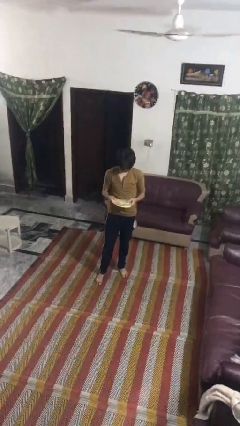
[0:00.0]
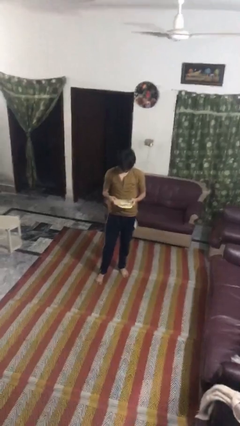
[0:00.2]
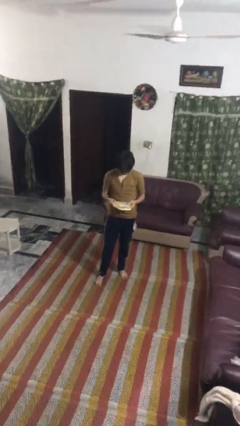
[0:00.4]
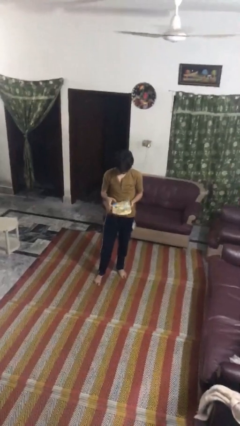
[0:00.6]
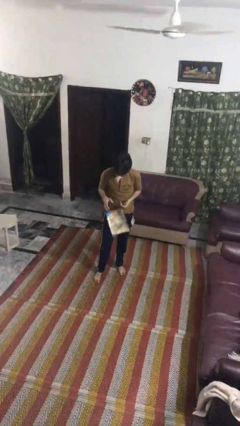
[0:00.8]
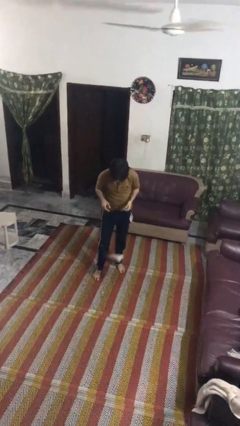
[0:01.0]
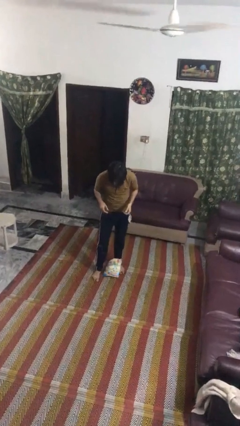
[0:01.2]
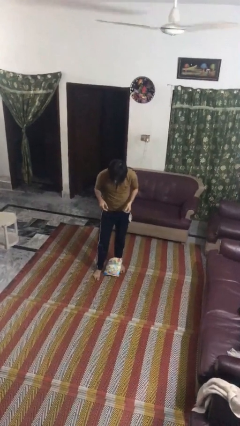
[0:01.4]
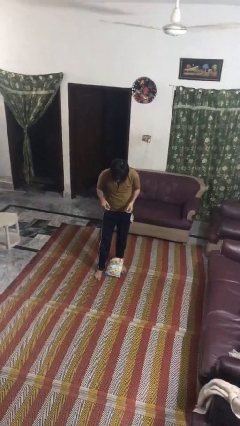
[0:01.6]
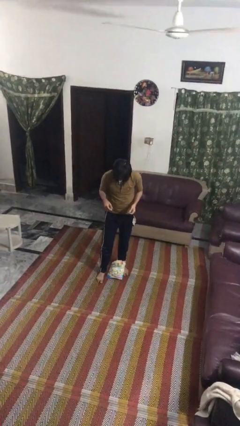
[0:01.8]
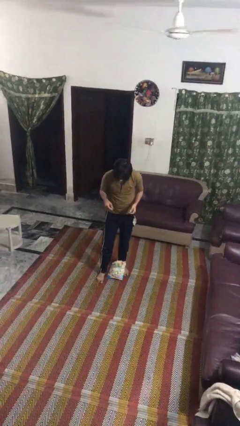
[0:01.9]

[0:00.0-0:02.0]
person drops object

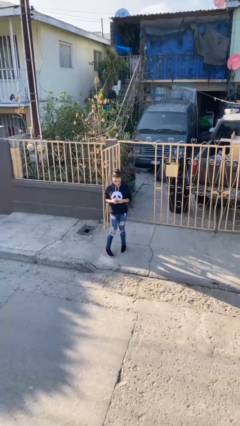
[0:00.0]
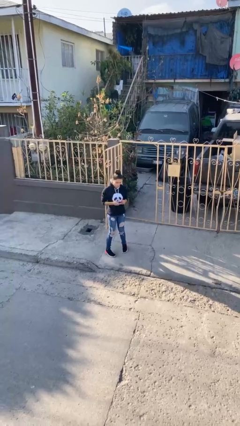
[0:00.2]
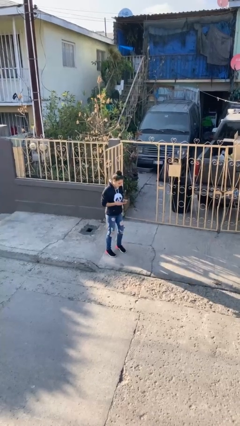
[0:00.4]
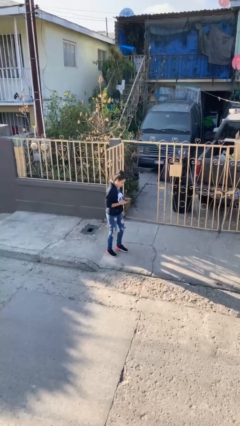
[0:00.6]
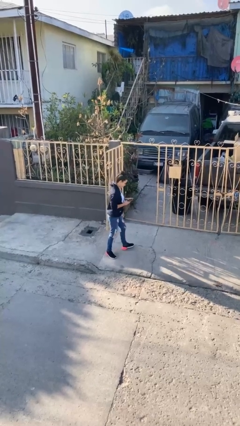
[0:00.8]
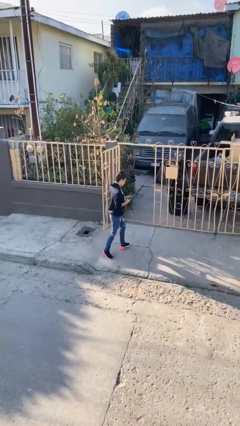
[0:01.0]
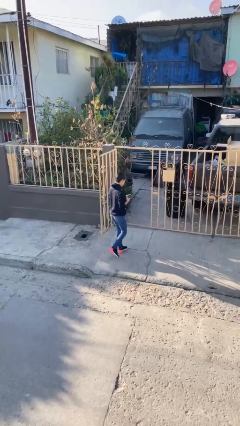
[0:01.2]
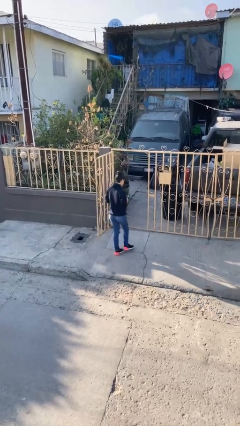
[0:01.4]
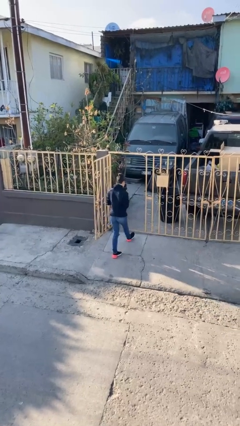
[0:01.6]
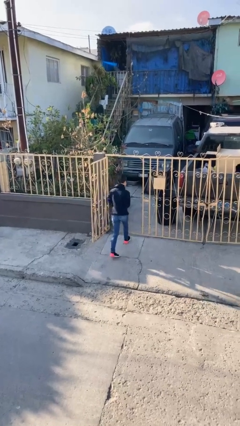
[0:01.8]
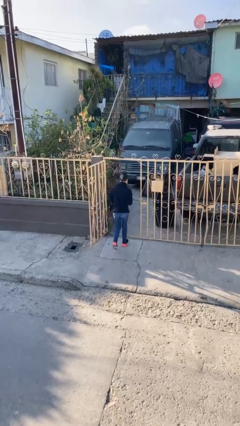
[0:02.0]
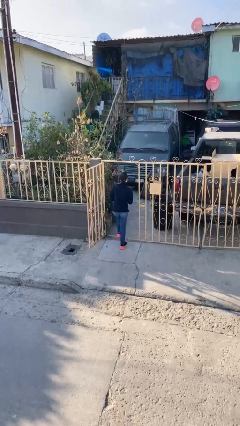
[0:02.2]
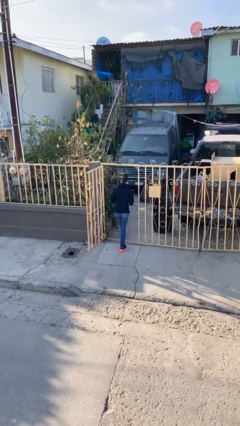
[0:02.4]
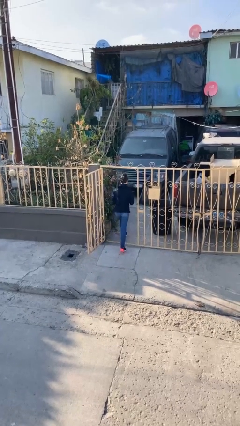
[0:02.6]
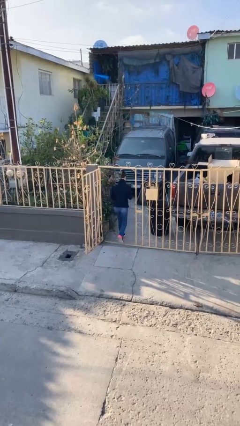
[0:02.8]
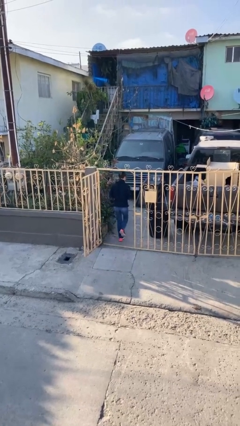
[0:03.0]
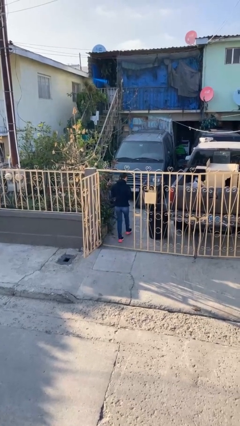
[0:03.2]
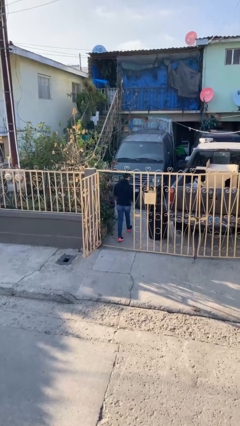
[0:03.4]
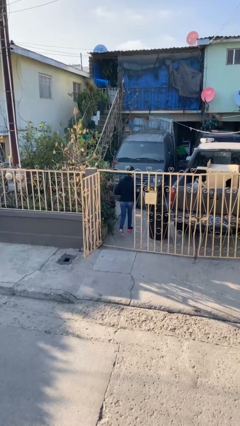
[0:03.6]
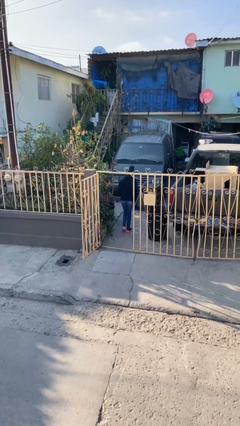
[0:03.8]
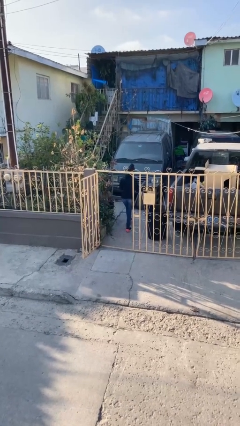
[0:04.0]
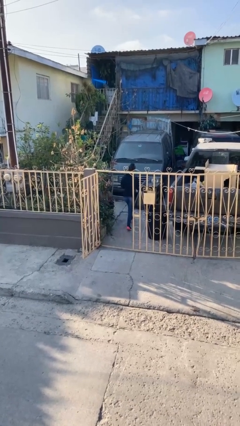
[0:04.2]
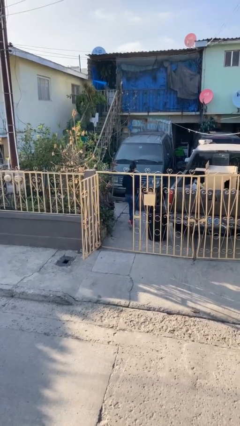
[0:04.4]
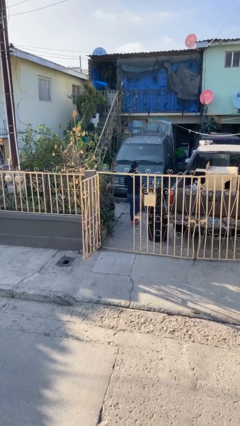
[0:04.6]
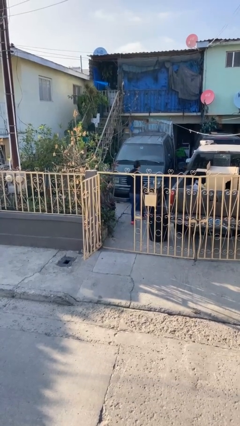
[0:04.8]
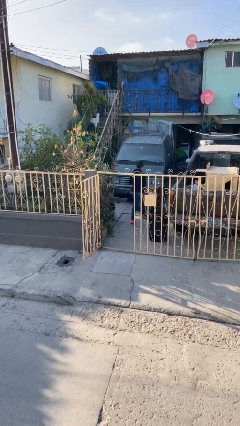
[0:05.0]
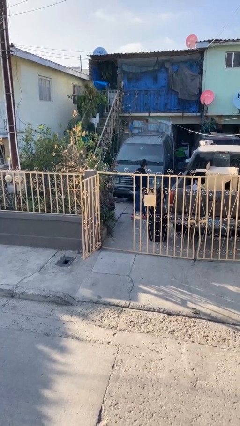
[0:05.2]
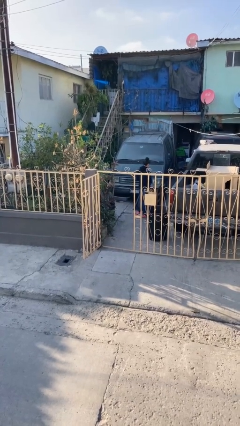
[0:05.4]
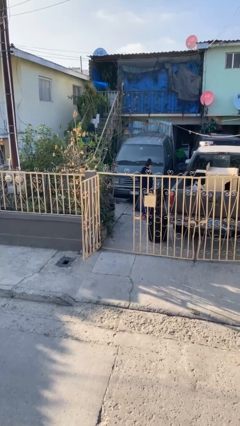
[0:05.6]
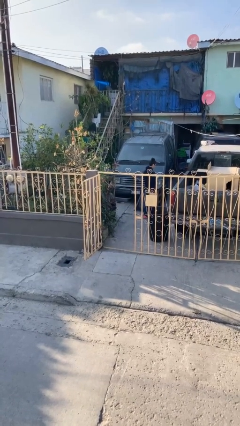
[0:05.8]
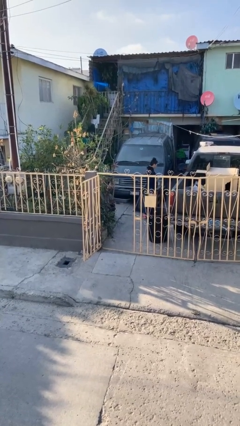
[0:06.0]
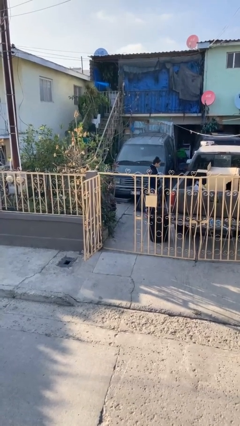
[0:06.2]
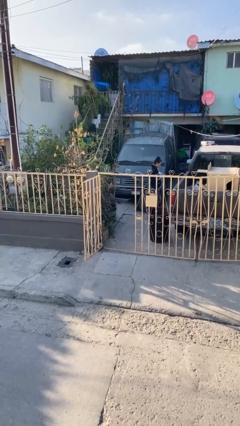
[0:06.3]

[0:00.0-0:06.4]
person exits scene through structure

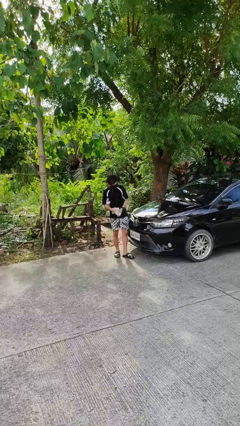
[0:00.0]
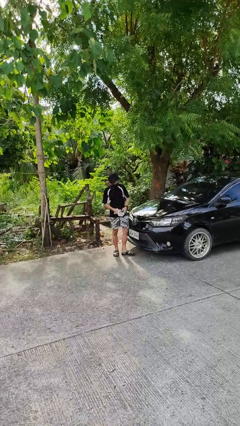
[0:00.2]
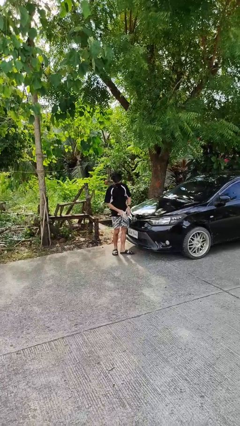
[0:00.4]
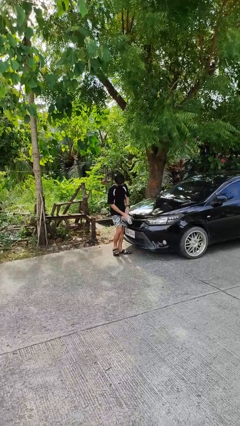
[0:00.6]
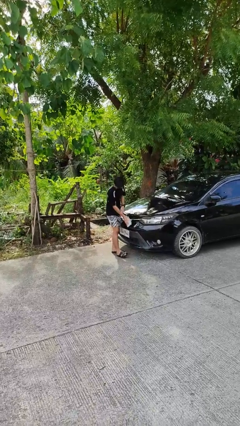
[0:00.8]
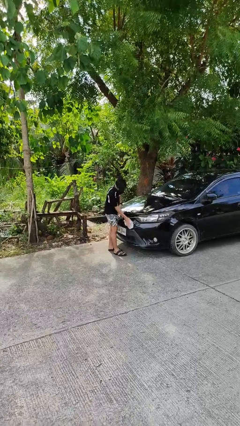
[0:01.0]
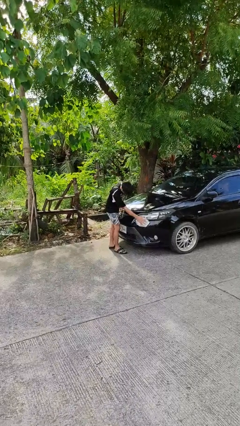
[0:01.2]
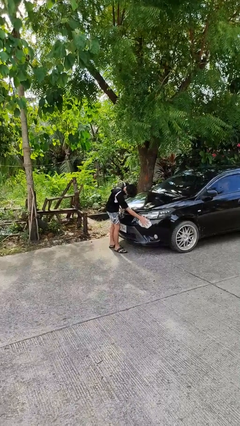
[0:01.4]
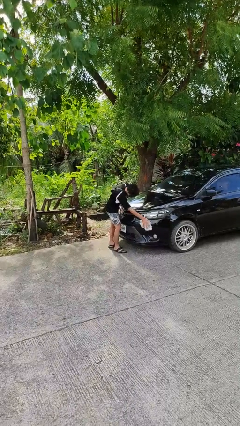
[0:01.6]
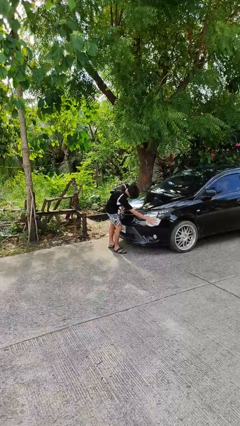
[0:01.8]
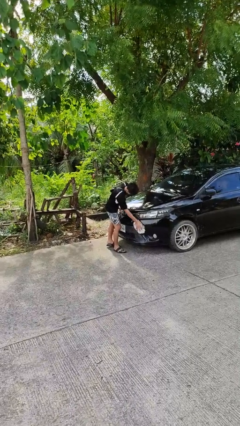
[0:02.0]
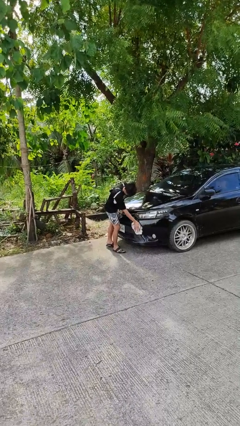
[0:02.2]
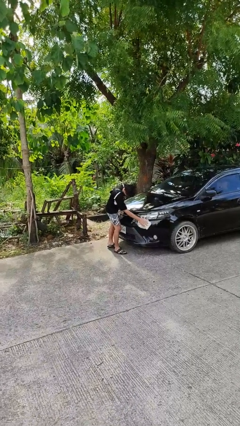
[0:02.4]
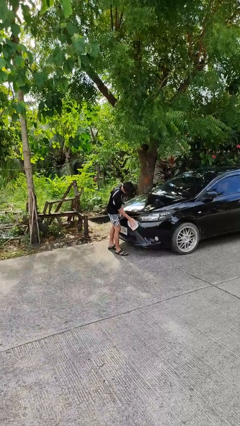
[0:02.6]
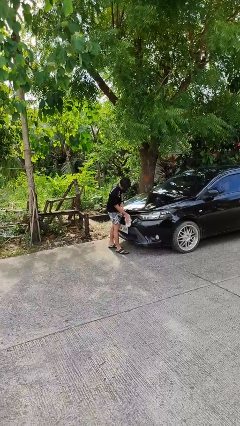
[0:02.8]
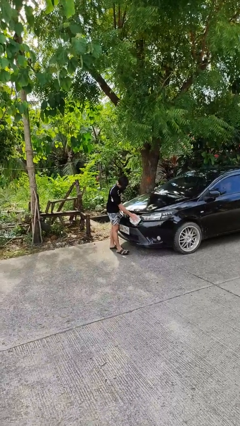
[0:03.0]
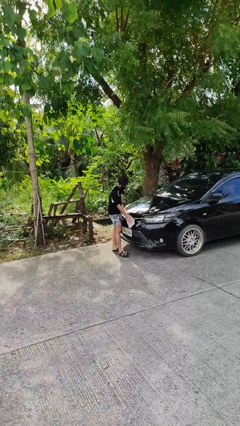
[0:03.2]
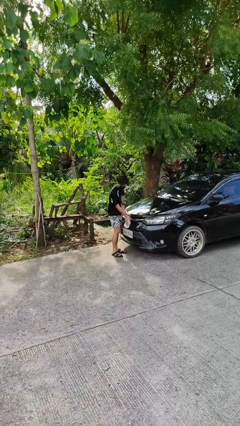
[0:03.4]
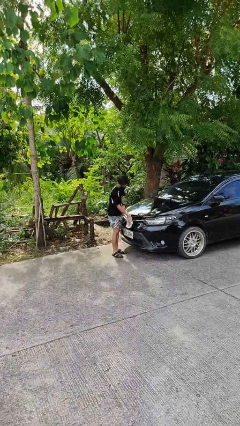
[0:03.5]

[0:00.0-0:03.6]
person polishes car with rag

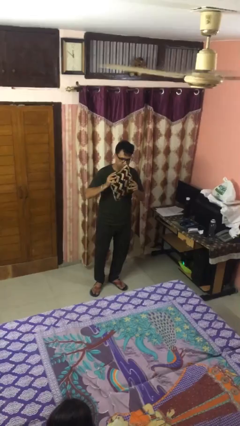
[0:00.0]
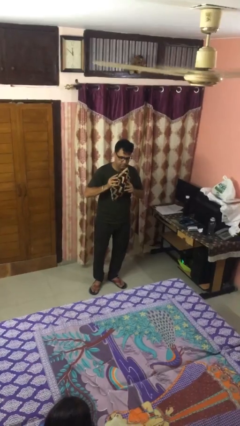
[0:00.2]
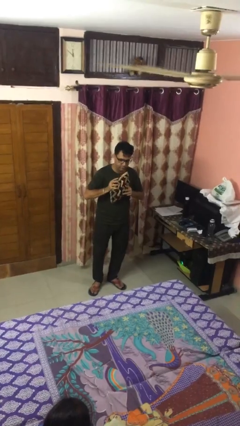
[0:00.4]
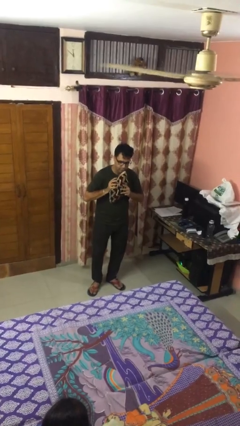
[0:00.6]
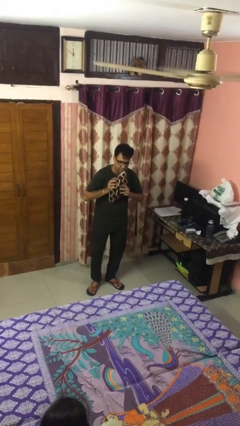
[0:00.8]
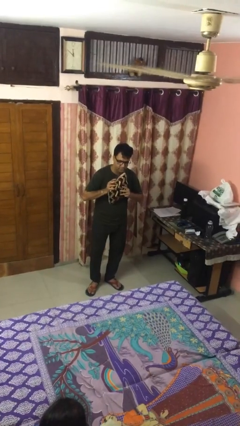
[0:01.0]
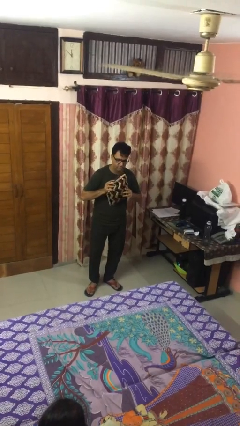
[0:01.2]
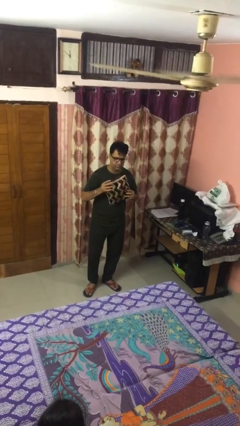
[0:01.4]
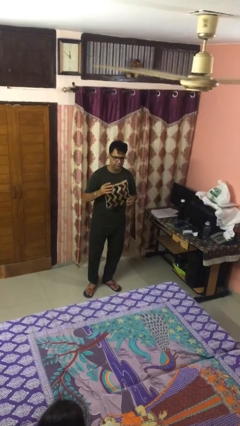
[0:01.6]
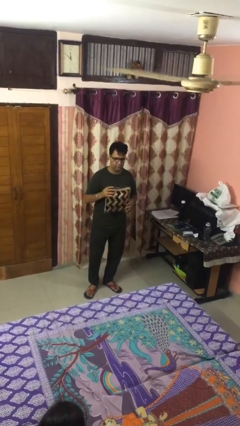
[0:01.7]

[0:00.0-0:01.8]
person squeezes object

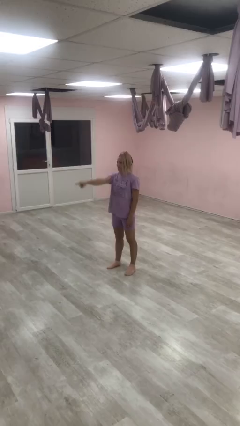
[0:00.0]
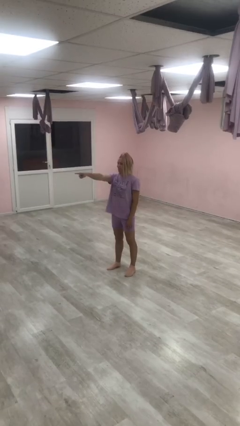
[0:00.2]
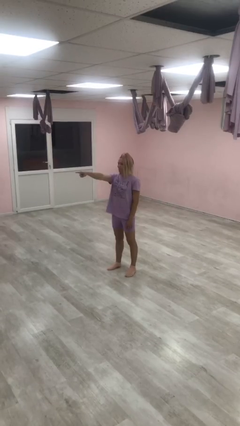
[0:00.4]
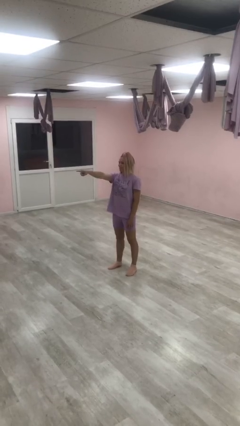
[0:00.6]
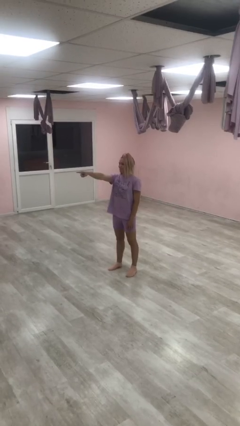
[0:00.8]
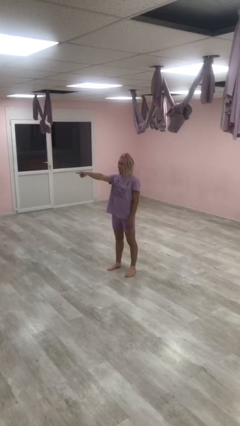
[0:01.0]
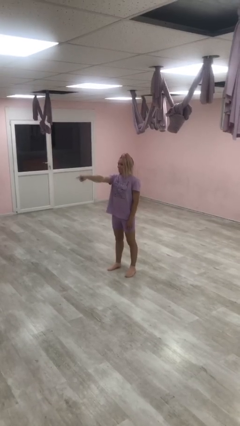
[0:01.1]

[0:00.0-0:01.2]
person points at person

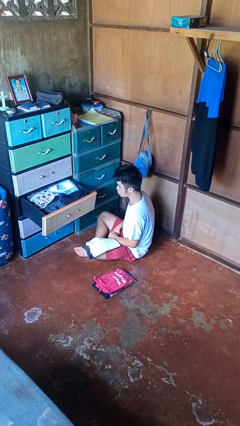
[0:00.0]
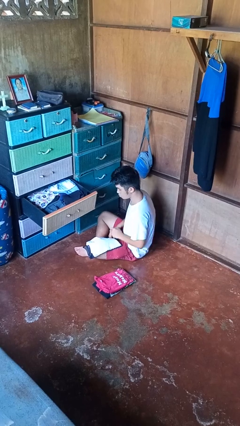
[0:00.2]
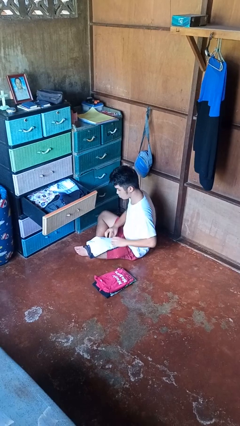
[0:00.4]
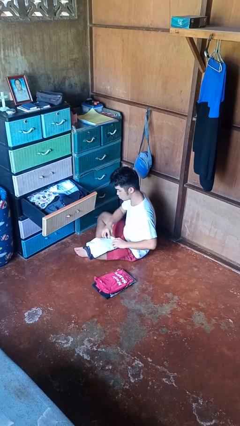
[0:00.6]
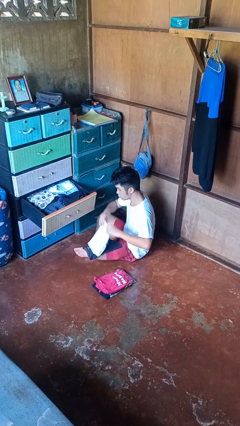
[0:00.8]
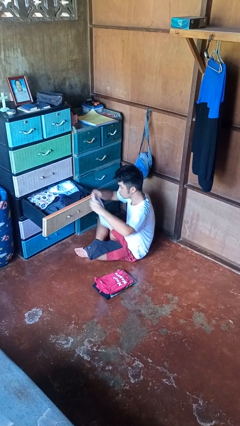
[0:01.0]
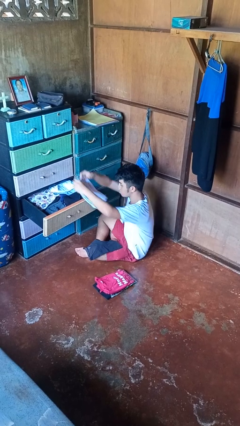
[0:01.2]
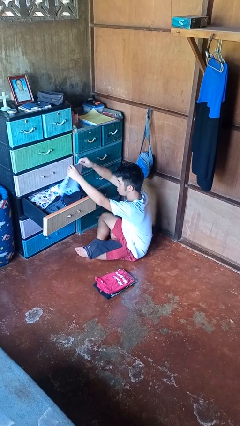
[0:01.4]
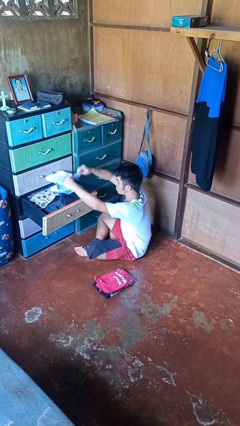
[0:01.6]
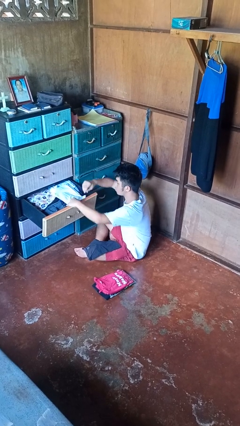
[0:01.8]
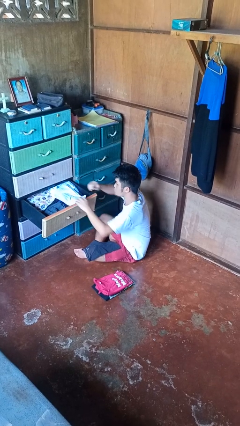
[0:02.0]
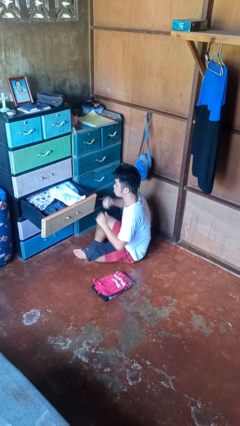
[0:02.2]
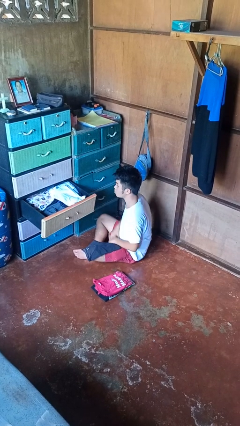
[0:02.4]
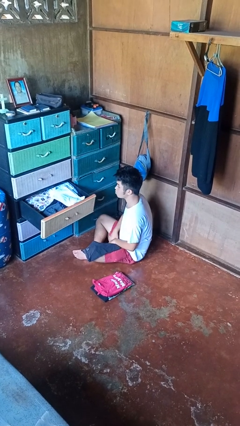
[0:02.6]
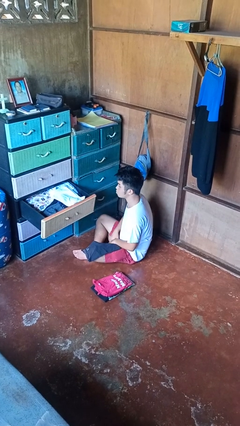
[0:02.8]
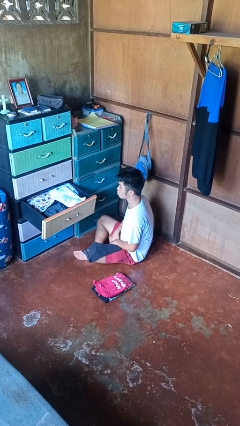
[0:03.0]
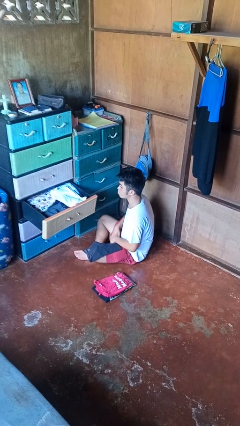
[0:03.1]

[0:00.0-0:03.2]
person puts clothes into dresser
